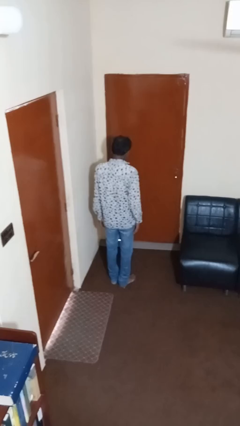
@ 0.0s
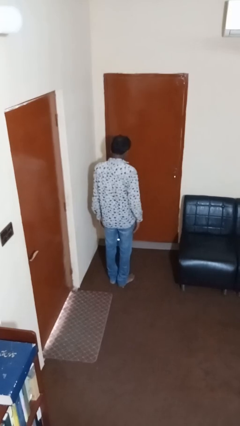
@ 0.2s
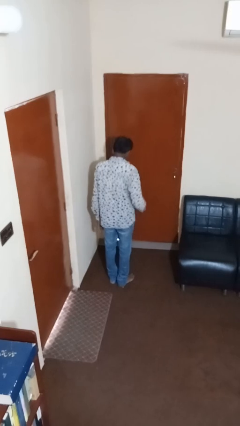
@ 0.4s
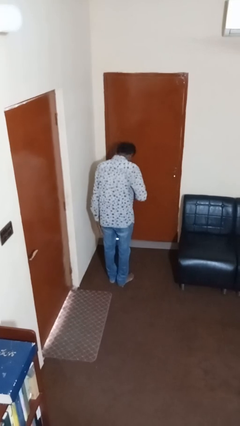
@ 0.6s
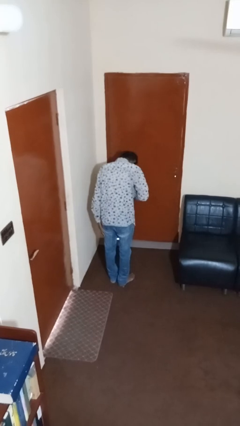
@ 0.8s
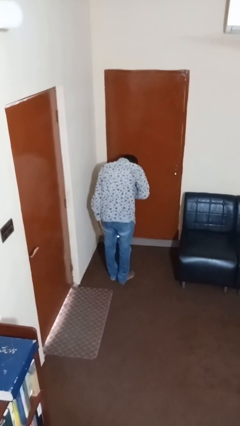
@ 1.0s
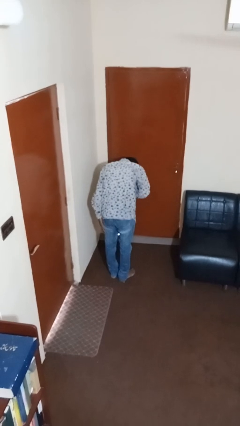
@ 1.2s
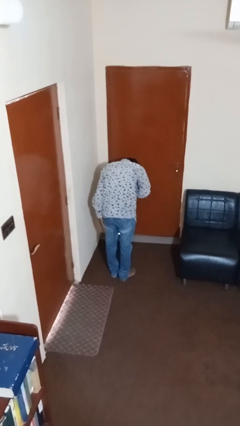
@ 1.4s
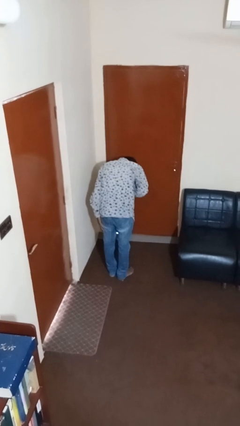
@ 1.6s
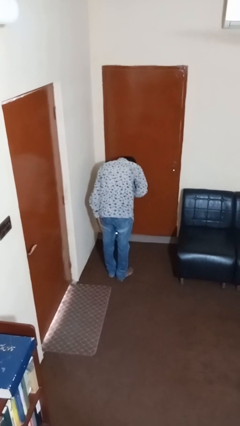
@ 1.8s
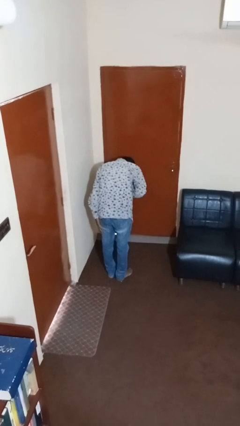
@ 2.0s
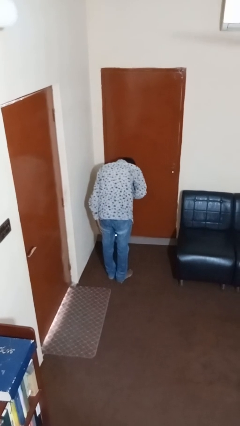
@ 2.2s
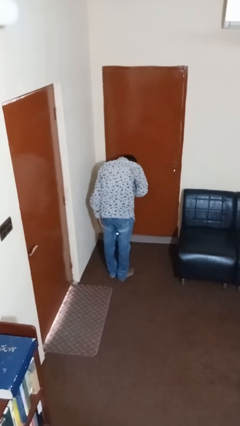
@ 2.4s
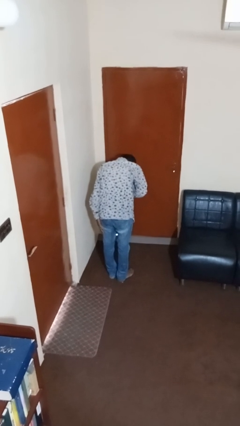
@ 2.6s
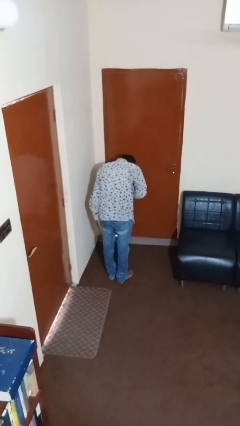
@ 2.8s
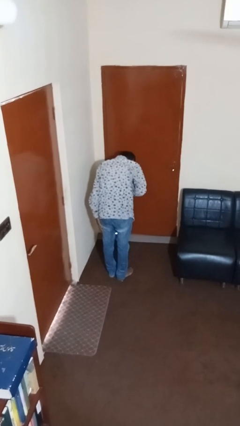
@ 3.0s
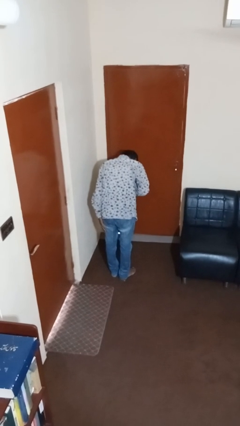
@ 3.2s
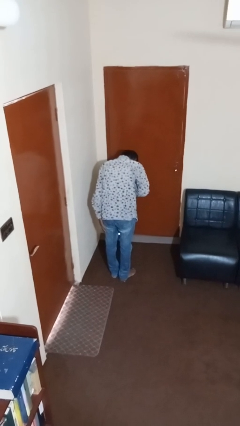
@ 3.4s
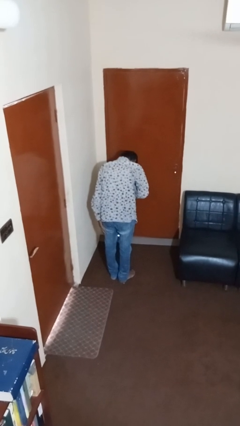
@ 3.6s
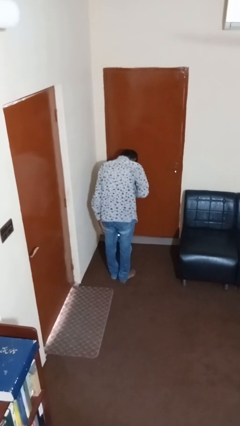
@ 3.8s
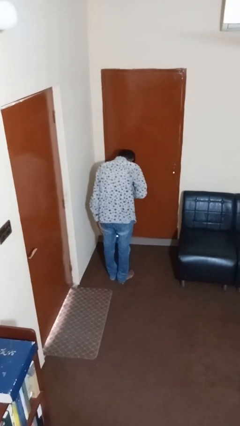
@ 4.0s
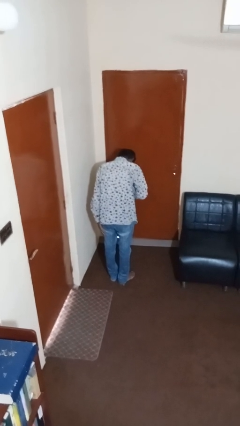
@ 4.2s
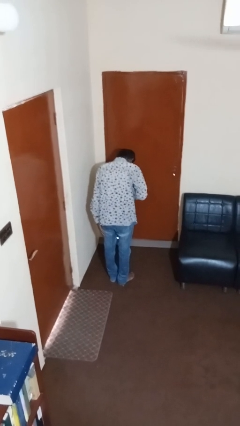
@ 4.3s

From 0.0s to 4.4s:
person bows

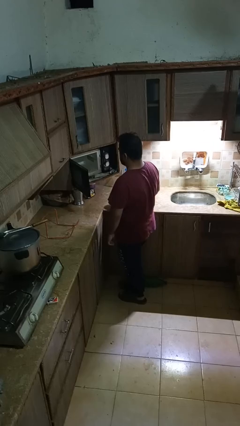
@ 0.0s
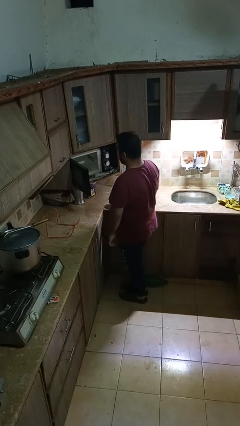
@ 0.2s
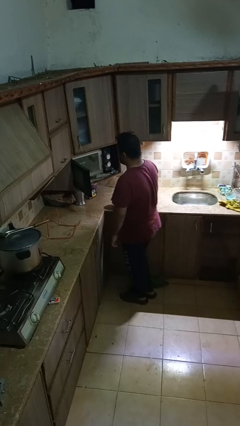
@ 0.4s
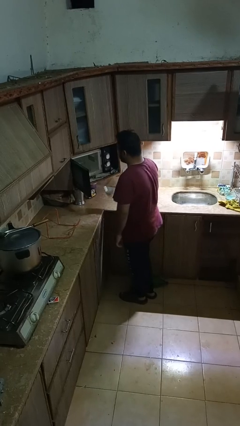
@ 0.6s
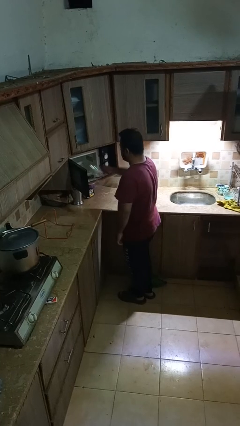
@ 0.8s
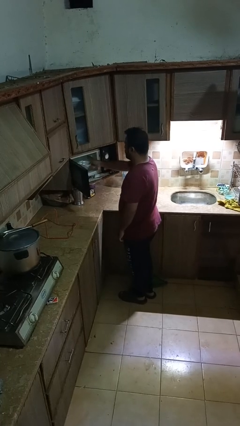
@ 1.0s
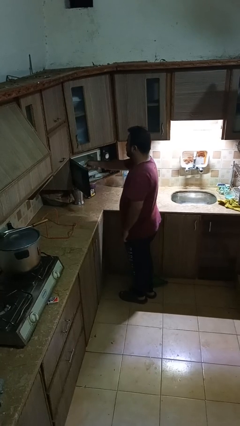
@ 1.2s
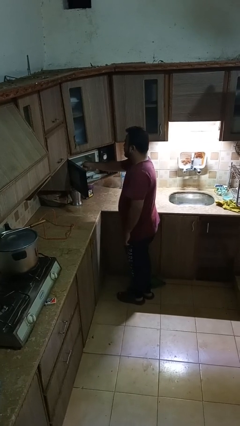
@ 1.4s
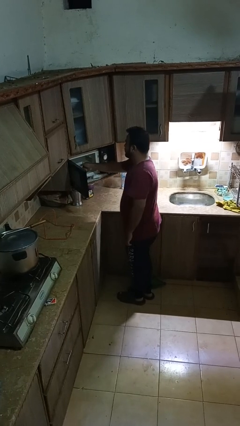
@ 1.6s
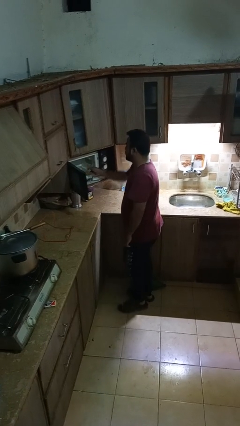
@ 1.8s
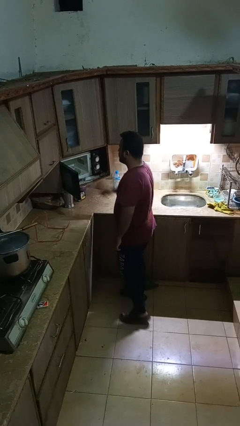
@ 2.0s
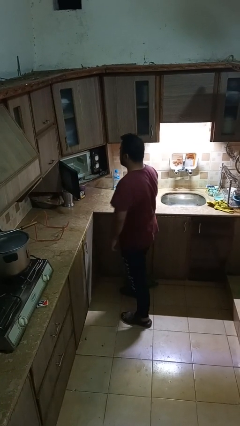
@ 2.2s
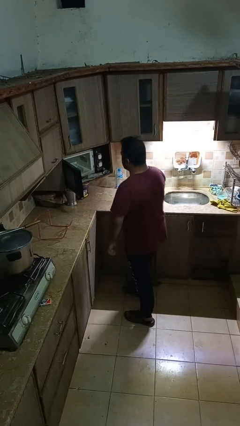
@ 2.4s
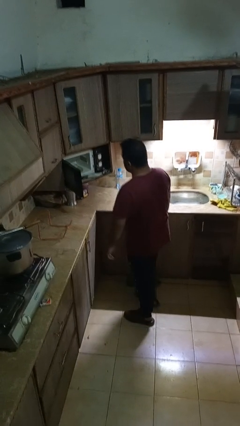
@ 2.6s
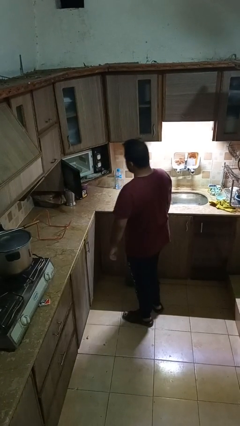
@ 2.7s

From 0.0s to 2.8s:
person puts object into microwave

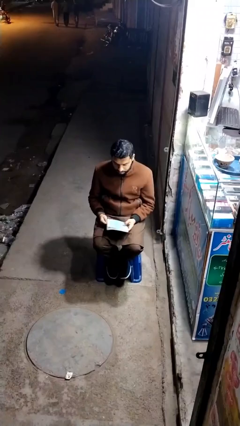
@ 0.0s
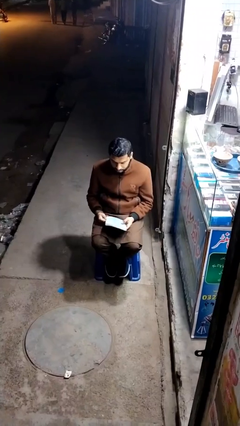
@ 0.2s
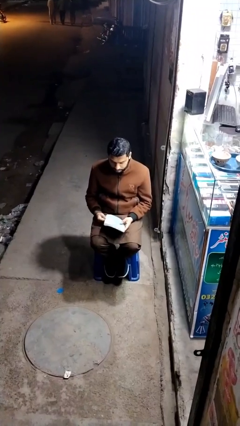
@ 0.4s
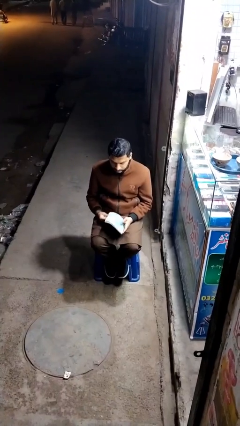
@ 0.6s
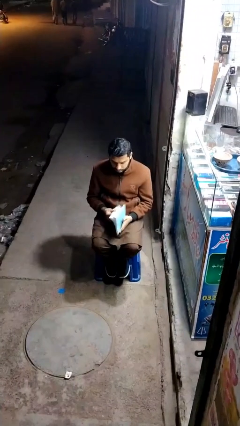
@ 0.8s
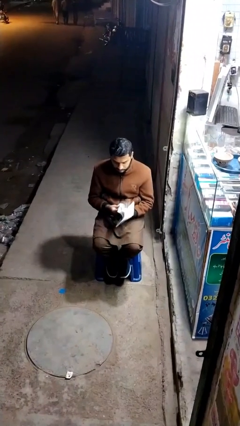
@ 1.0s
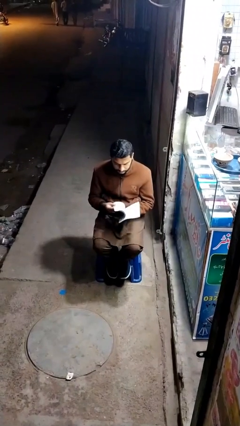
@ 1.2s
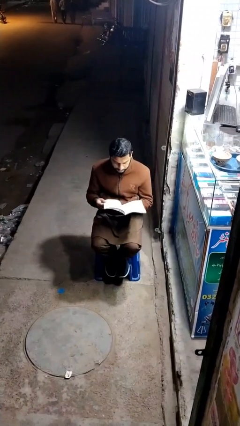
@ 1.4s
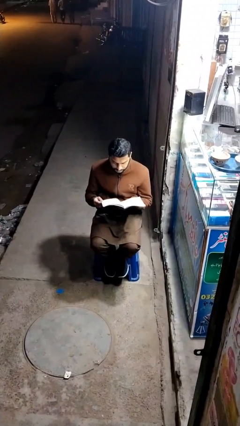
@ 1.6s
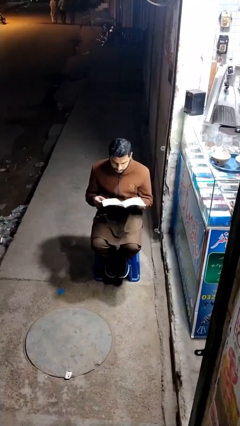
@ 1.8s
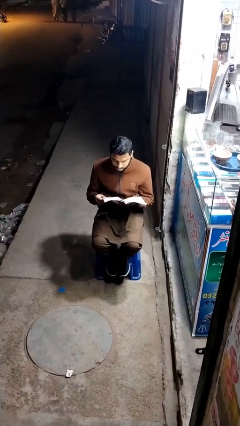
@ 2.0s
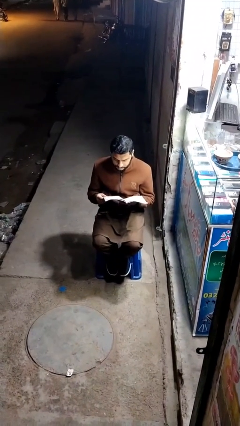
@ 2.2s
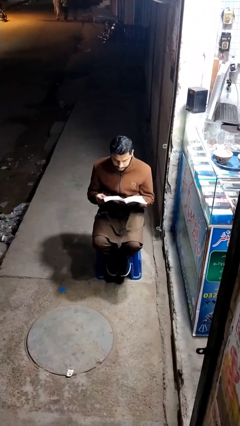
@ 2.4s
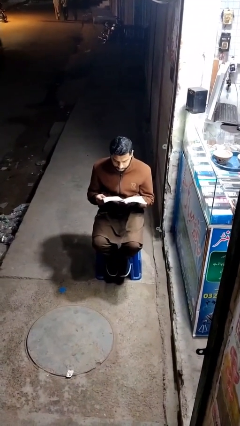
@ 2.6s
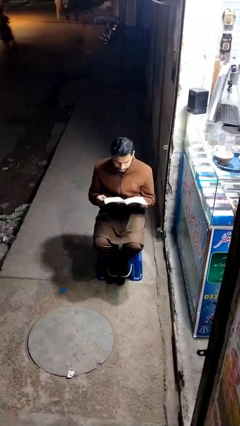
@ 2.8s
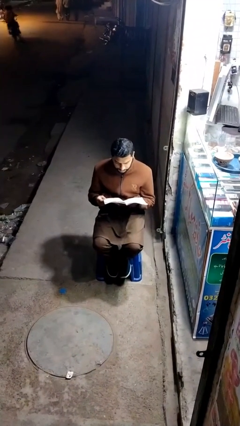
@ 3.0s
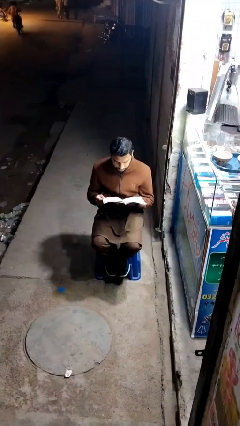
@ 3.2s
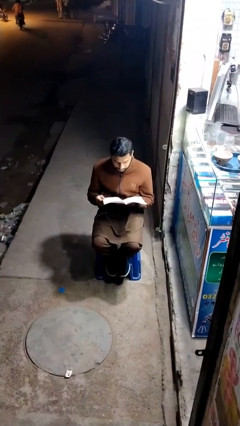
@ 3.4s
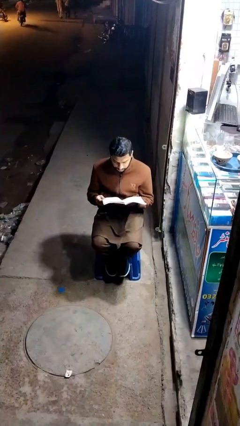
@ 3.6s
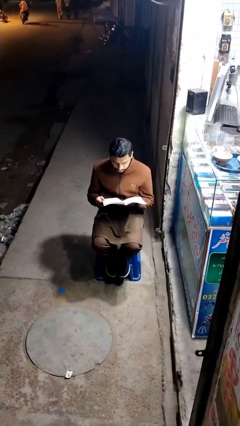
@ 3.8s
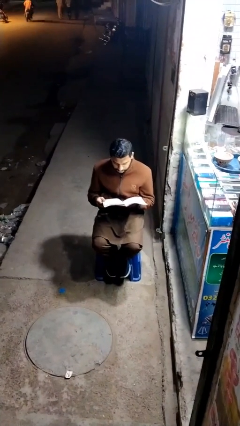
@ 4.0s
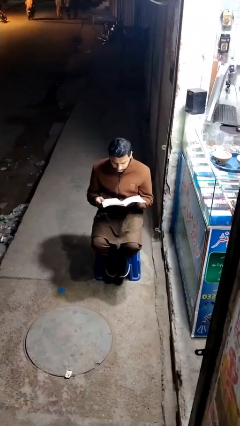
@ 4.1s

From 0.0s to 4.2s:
person interacts with laptop

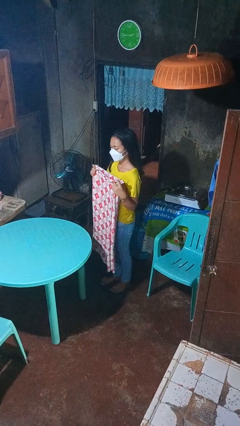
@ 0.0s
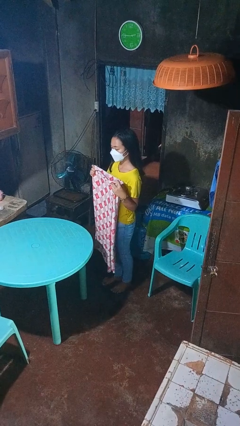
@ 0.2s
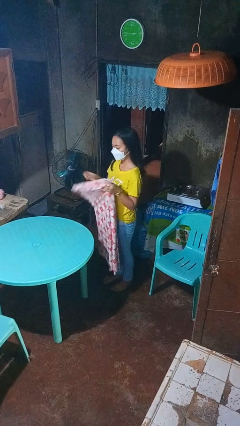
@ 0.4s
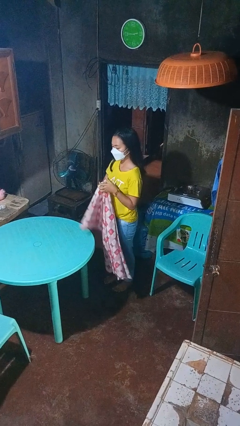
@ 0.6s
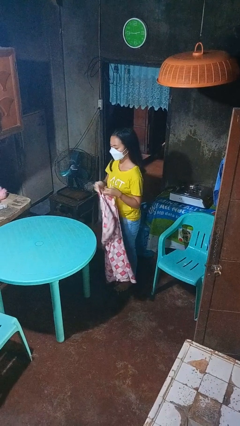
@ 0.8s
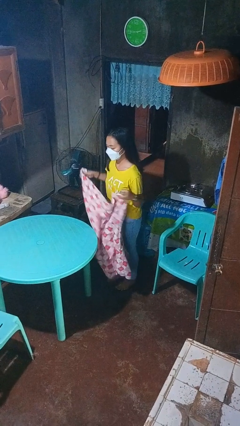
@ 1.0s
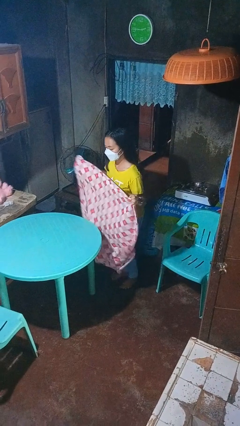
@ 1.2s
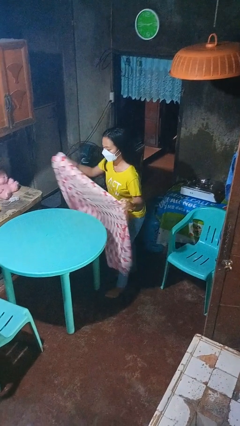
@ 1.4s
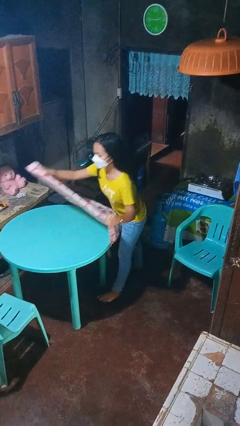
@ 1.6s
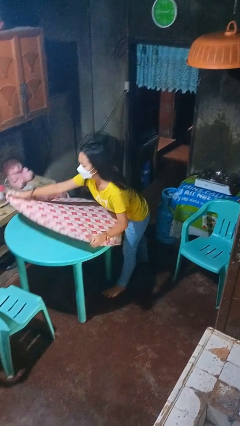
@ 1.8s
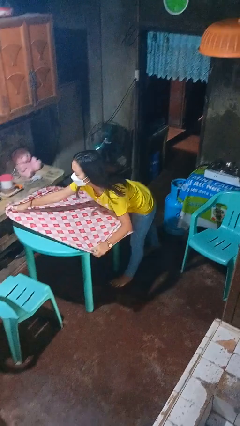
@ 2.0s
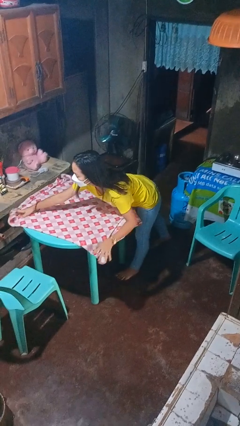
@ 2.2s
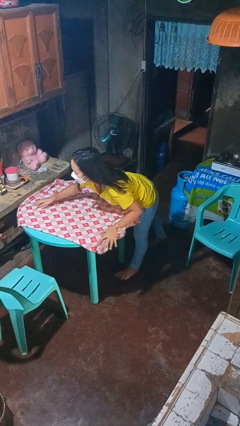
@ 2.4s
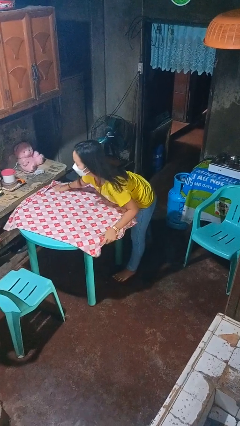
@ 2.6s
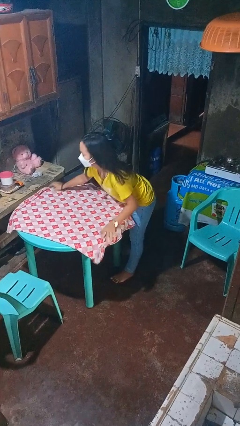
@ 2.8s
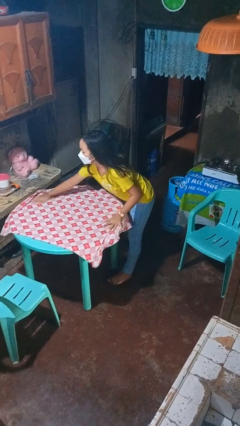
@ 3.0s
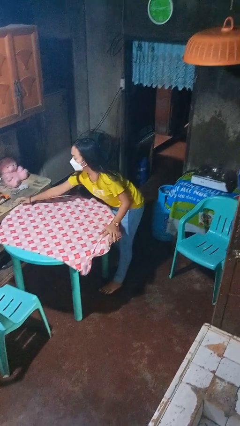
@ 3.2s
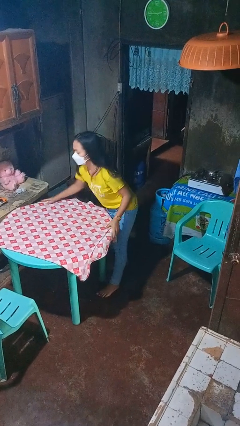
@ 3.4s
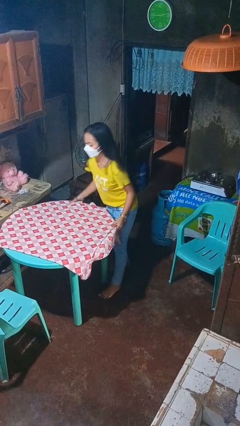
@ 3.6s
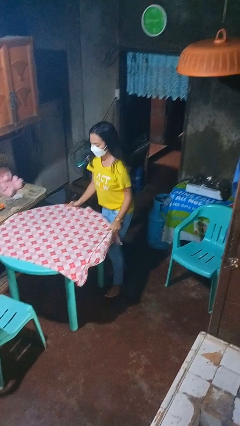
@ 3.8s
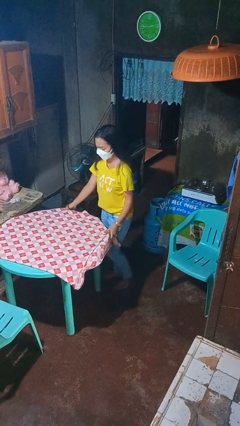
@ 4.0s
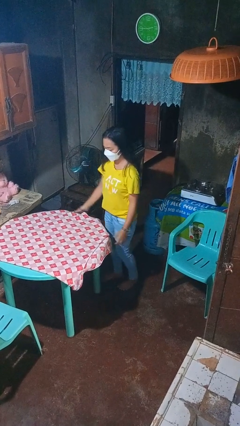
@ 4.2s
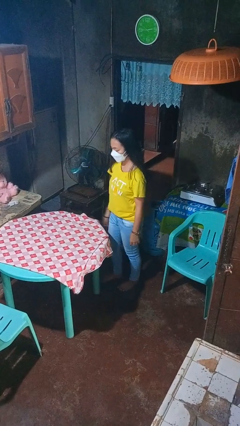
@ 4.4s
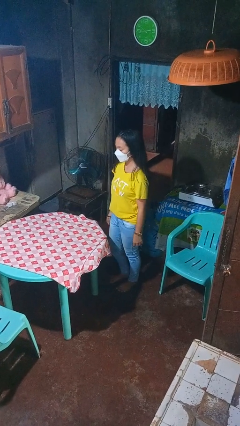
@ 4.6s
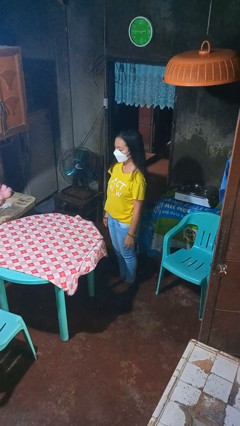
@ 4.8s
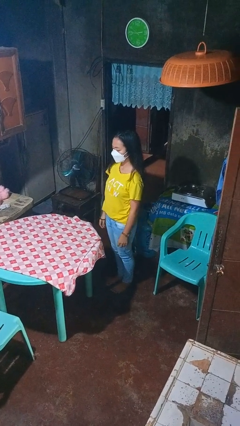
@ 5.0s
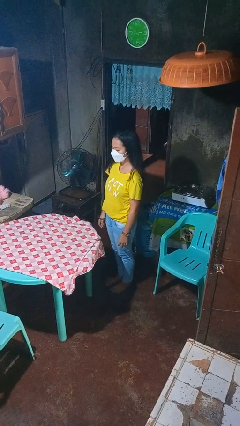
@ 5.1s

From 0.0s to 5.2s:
person spreads tablecloth

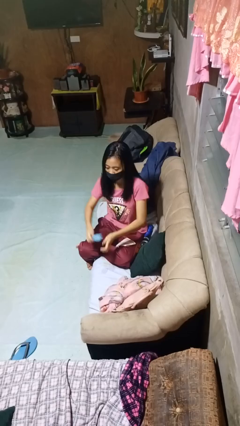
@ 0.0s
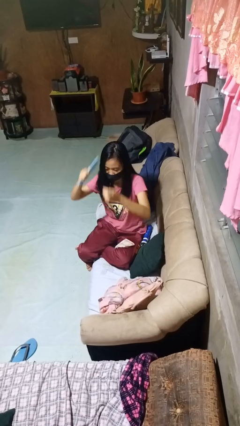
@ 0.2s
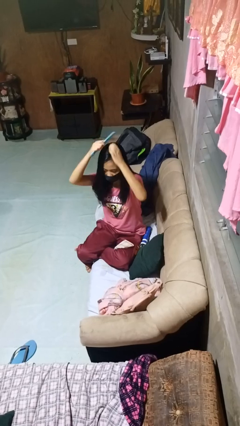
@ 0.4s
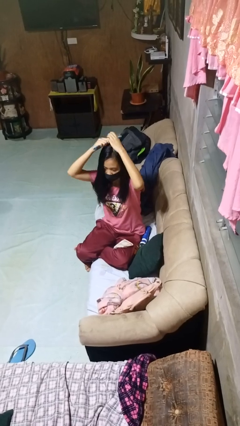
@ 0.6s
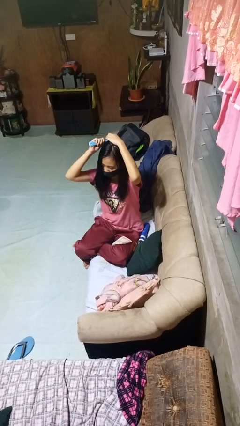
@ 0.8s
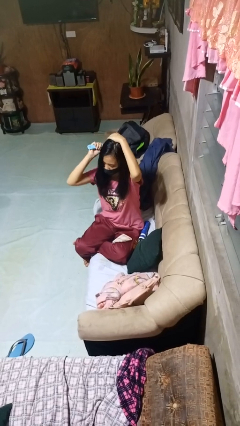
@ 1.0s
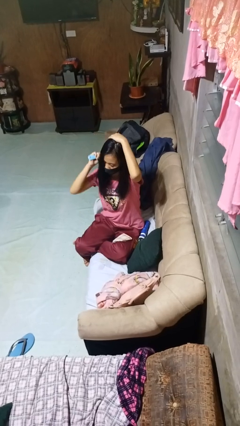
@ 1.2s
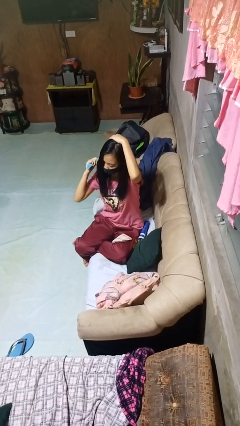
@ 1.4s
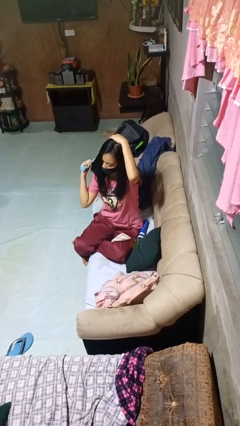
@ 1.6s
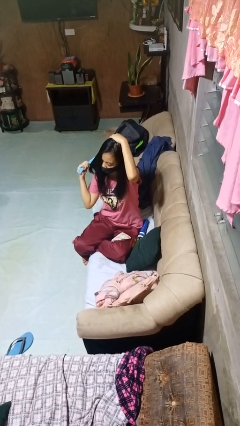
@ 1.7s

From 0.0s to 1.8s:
person brushes hair
